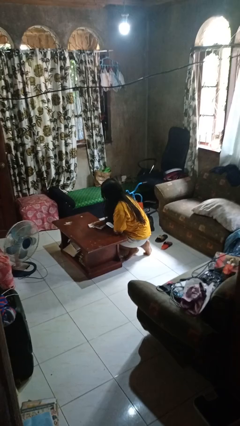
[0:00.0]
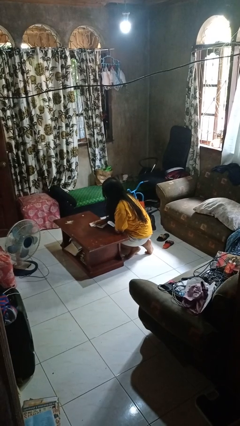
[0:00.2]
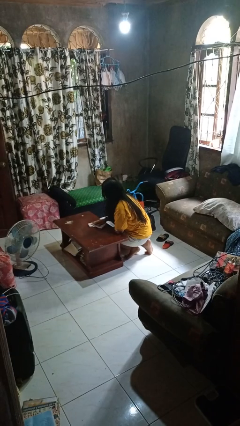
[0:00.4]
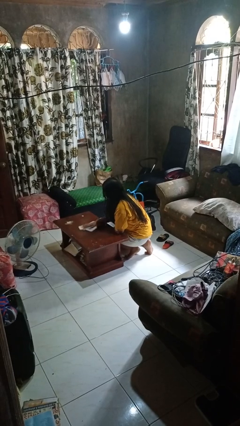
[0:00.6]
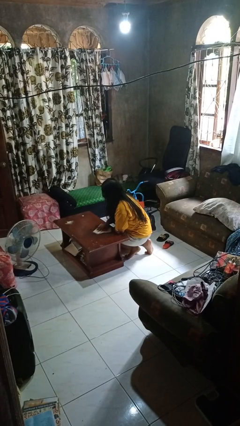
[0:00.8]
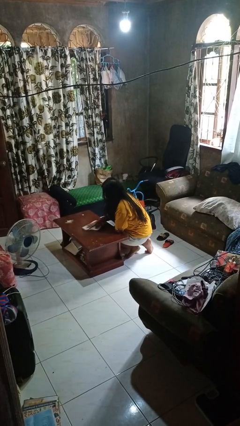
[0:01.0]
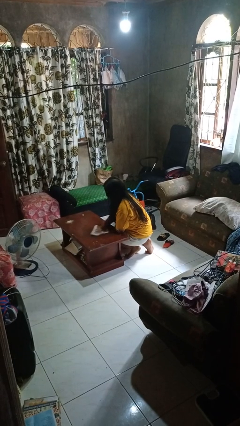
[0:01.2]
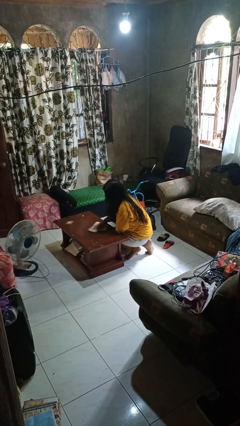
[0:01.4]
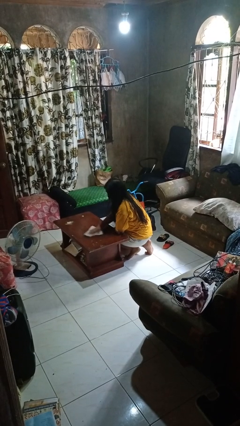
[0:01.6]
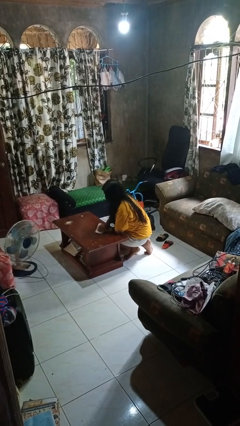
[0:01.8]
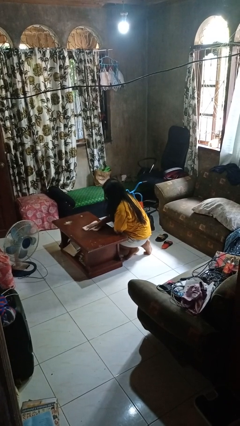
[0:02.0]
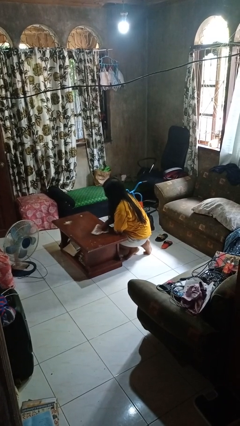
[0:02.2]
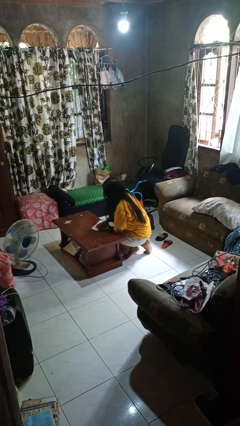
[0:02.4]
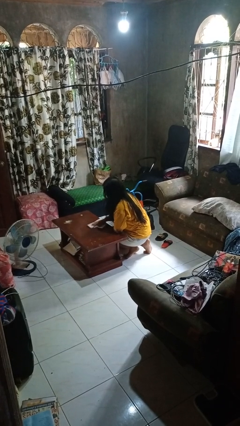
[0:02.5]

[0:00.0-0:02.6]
person cleans table with rag

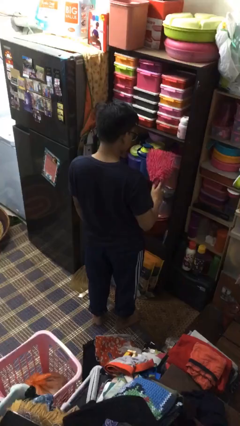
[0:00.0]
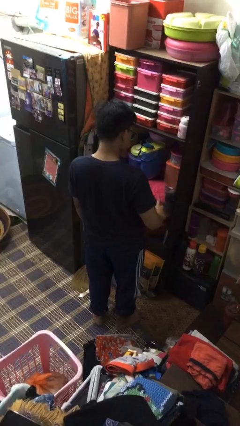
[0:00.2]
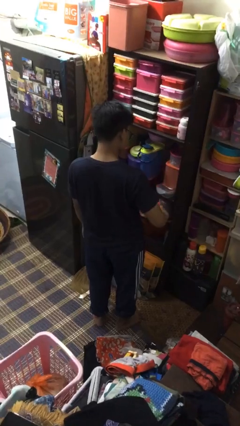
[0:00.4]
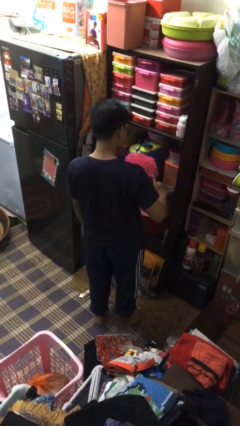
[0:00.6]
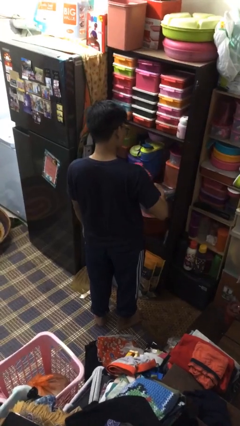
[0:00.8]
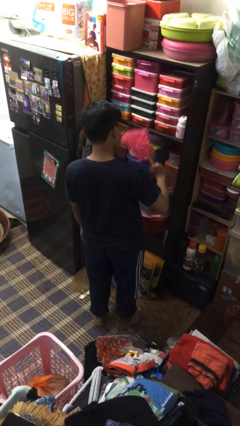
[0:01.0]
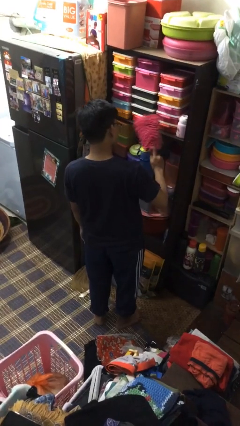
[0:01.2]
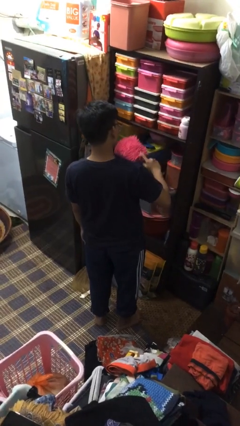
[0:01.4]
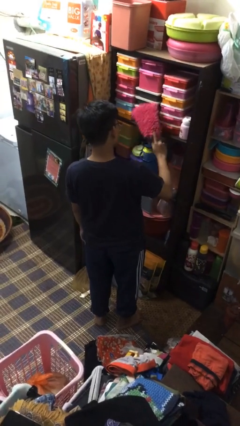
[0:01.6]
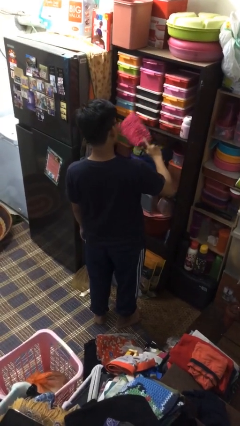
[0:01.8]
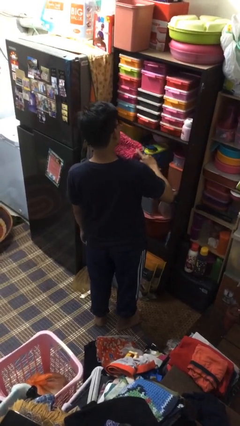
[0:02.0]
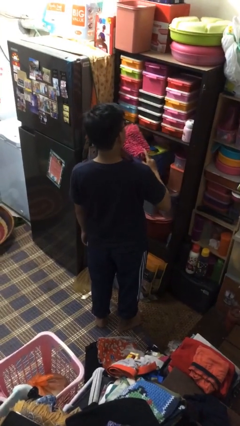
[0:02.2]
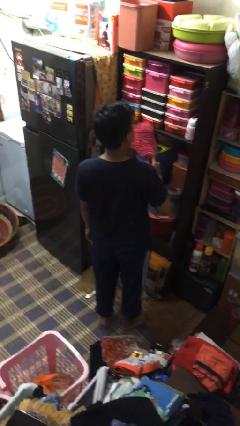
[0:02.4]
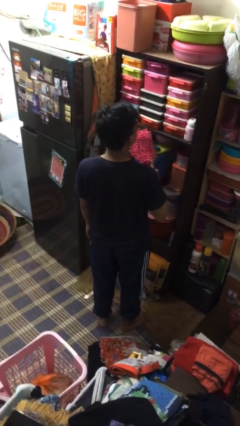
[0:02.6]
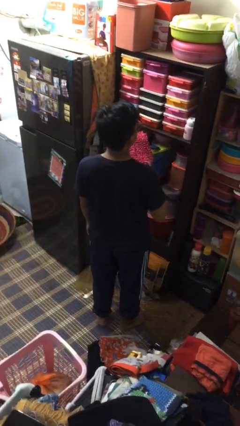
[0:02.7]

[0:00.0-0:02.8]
person dusts furniture

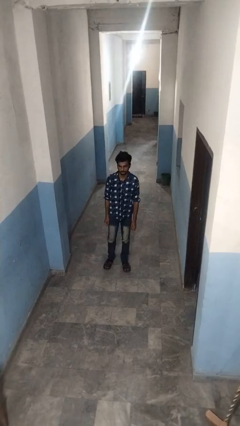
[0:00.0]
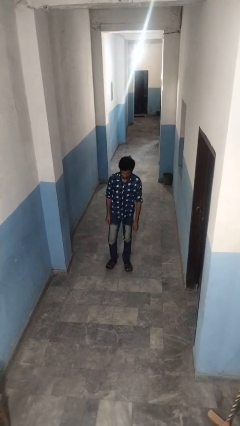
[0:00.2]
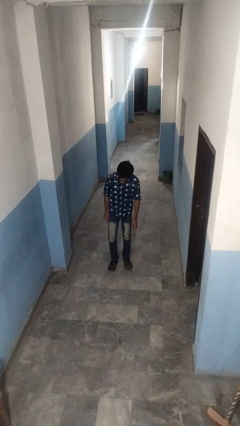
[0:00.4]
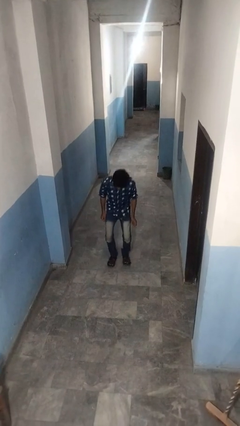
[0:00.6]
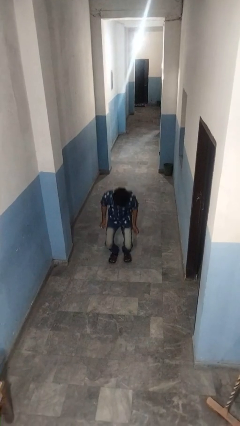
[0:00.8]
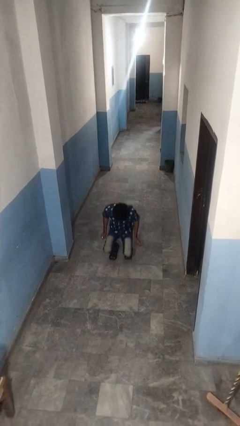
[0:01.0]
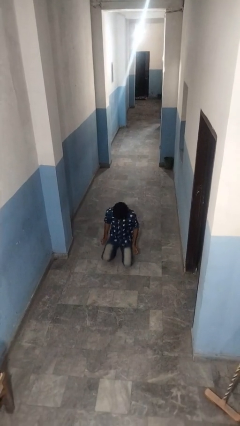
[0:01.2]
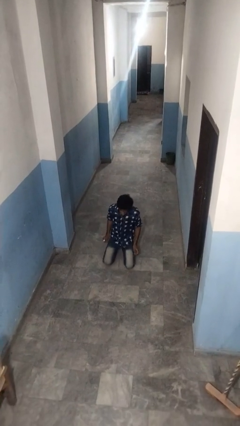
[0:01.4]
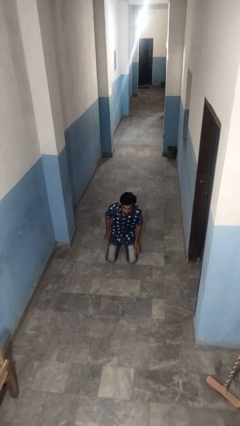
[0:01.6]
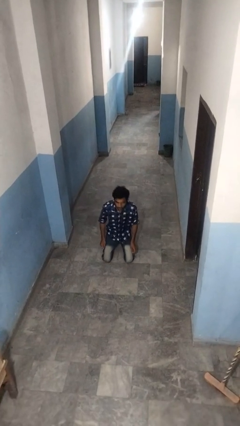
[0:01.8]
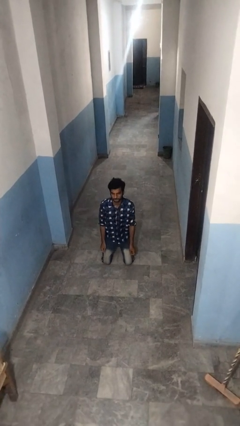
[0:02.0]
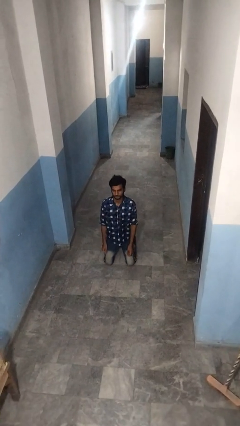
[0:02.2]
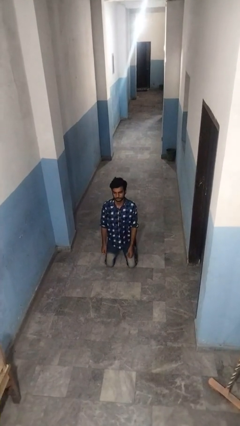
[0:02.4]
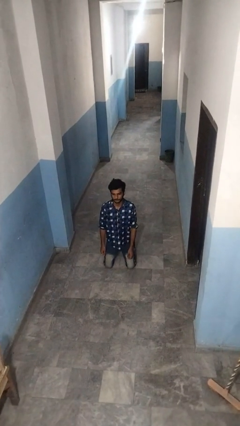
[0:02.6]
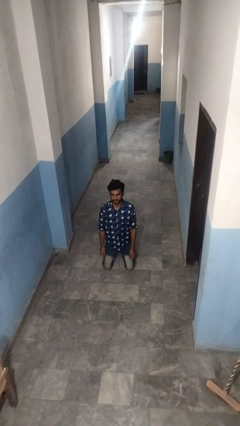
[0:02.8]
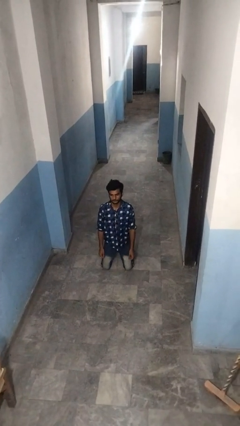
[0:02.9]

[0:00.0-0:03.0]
person kneels

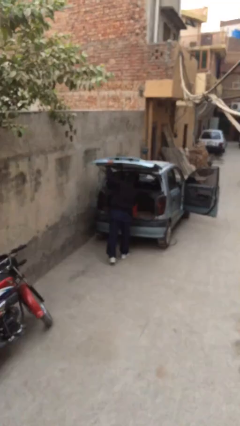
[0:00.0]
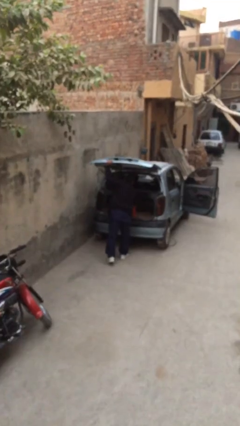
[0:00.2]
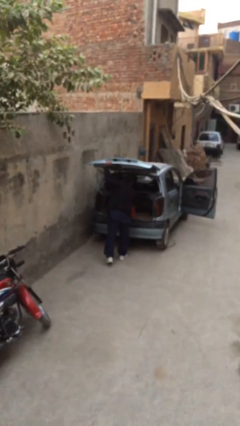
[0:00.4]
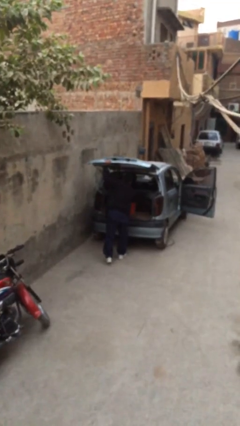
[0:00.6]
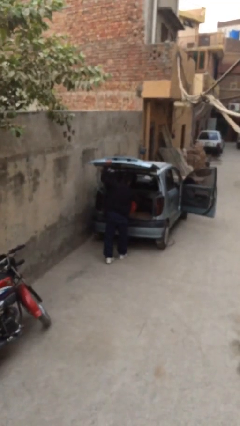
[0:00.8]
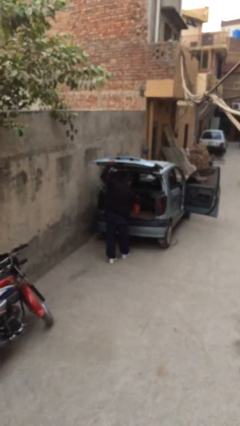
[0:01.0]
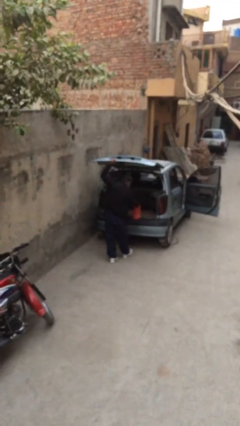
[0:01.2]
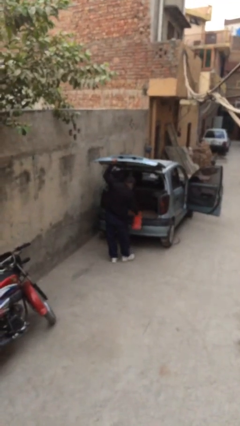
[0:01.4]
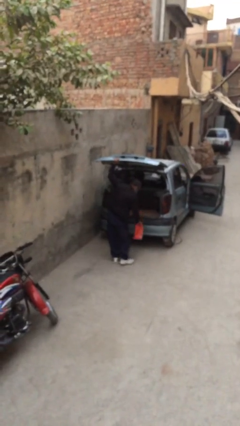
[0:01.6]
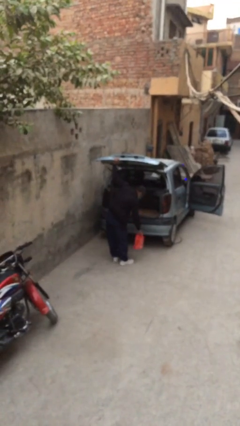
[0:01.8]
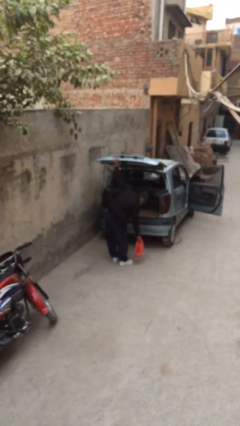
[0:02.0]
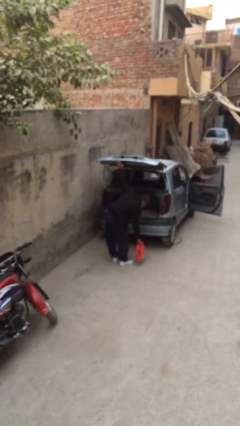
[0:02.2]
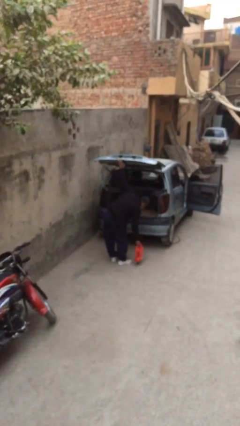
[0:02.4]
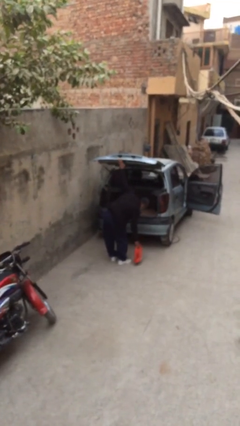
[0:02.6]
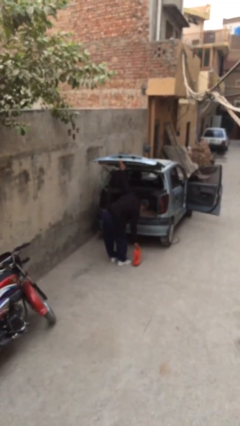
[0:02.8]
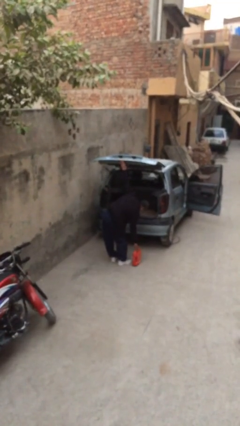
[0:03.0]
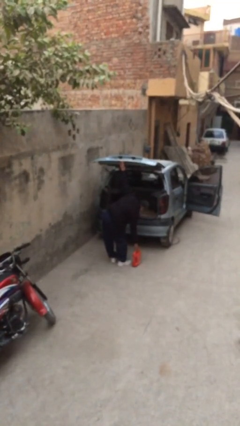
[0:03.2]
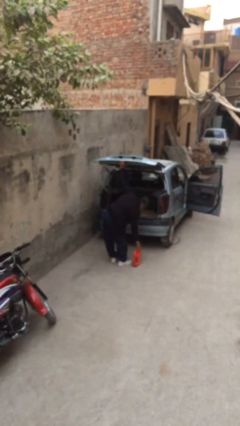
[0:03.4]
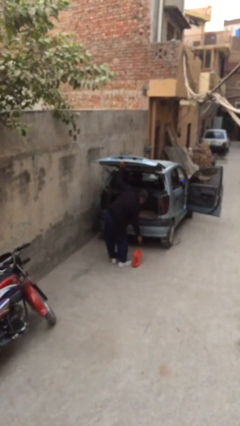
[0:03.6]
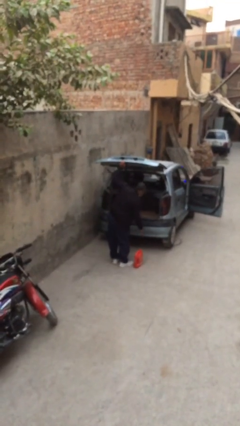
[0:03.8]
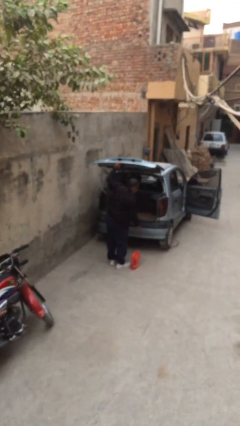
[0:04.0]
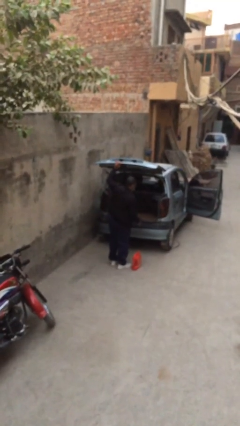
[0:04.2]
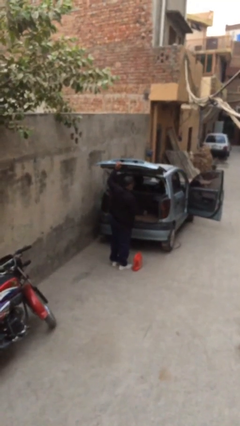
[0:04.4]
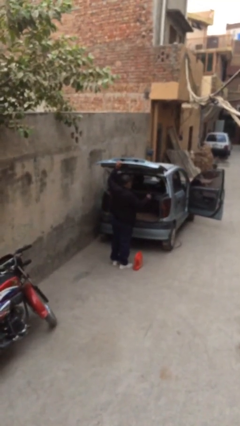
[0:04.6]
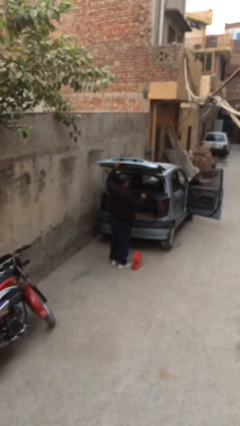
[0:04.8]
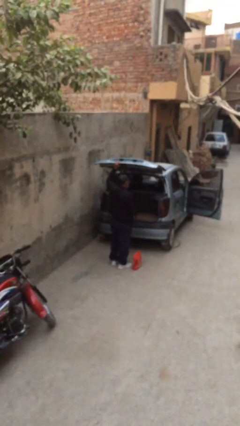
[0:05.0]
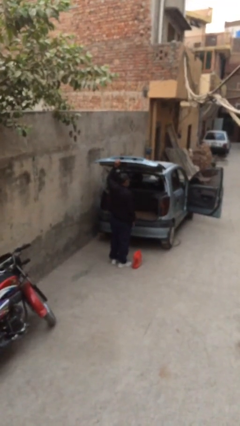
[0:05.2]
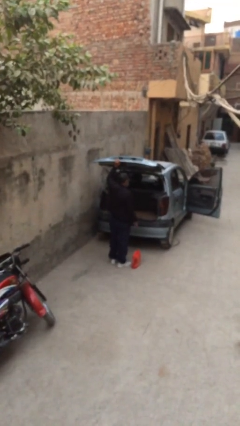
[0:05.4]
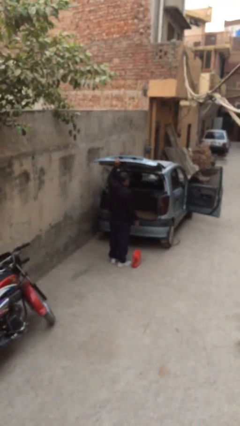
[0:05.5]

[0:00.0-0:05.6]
person unloads car

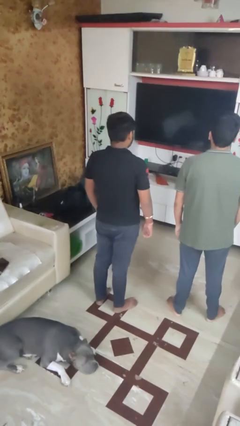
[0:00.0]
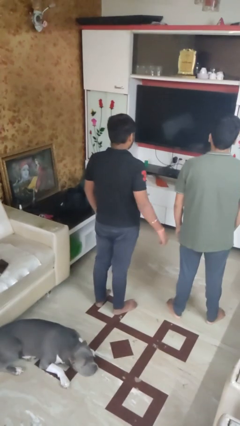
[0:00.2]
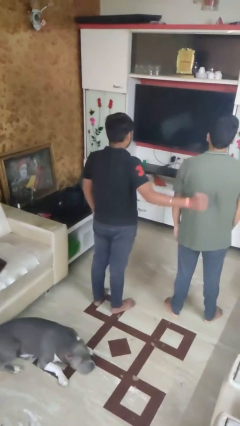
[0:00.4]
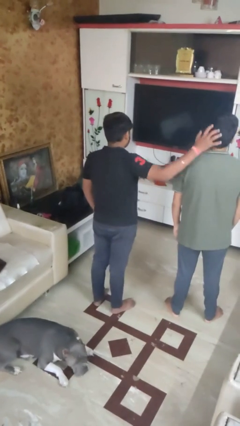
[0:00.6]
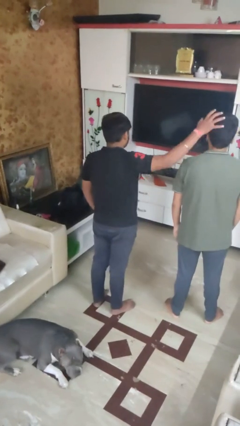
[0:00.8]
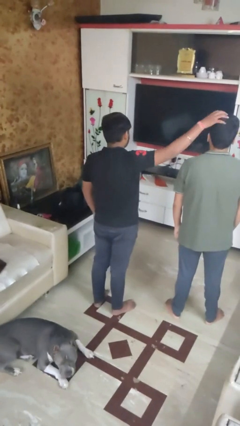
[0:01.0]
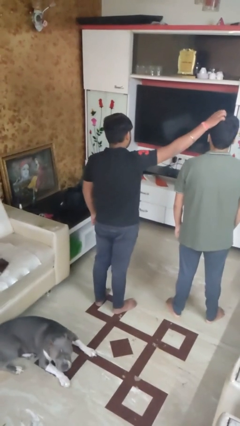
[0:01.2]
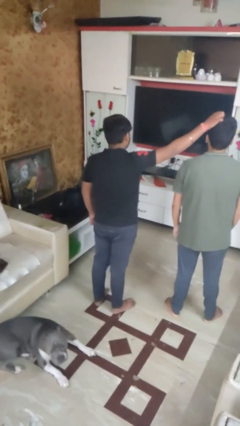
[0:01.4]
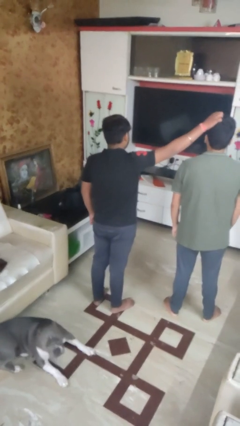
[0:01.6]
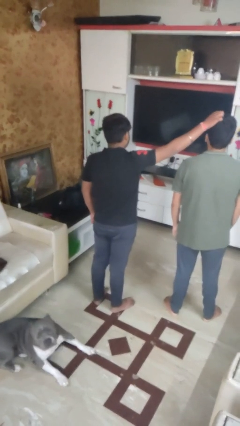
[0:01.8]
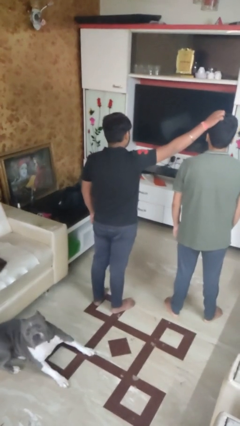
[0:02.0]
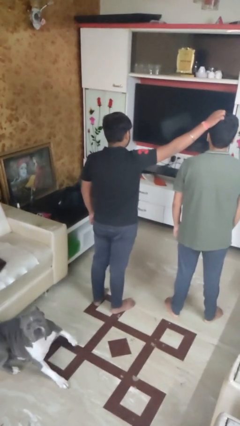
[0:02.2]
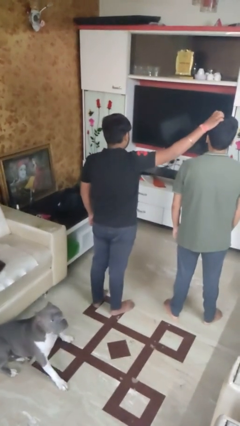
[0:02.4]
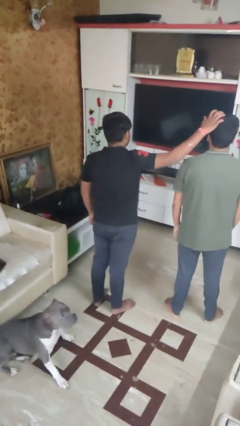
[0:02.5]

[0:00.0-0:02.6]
person grabs person by hair

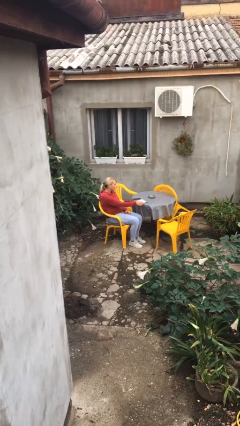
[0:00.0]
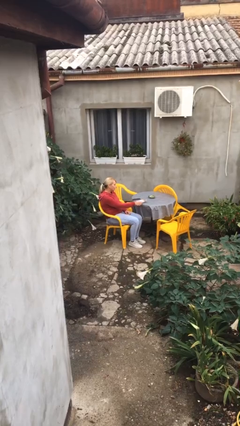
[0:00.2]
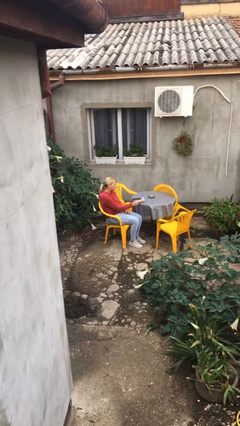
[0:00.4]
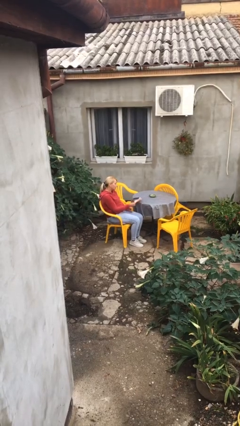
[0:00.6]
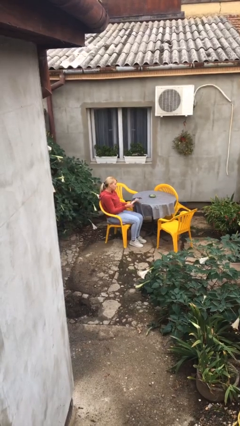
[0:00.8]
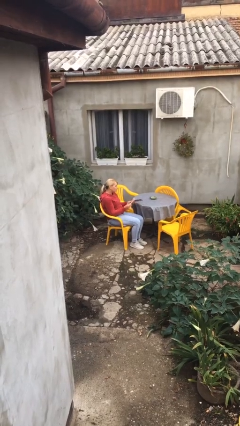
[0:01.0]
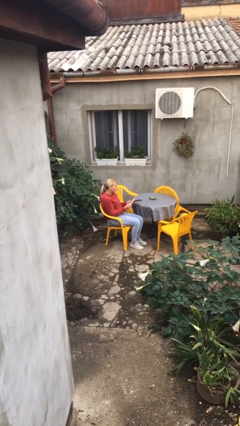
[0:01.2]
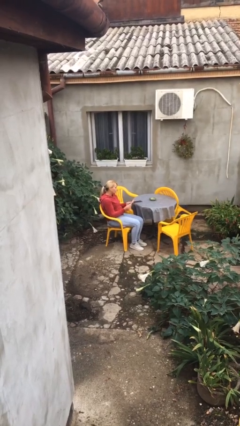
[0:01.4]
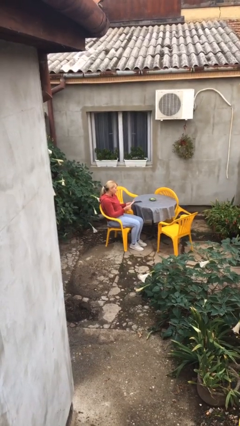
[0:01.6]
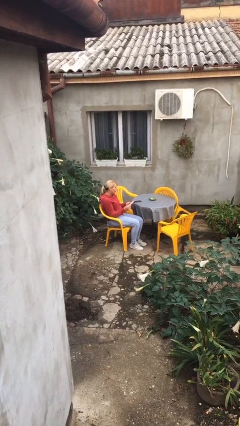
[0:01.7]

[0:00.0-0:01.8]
person picks up object from table
